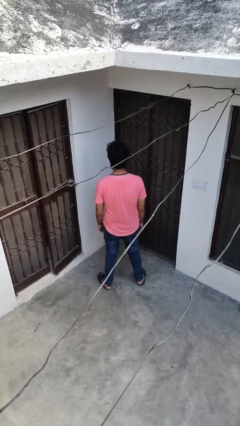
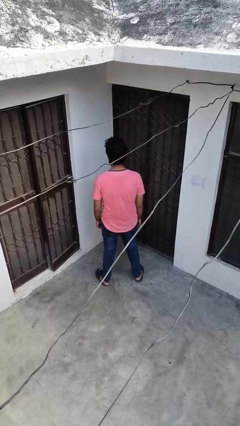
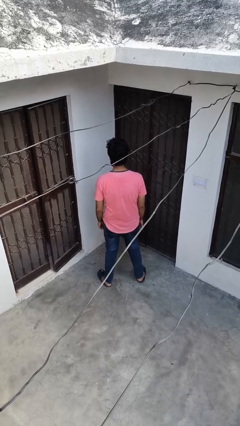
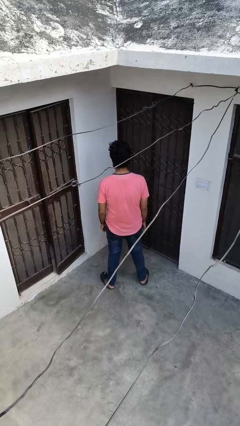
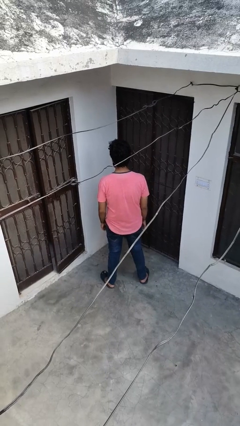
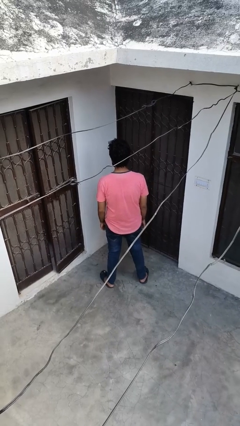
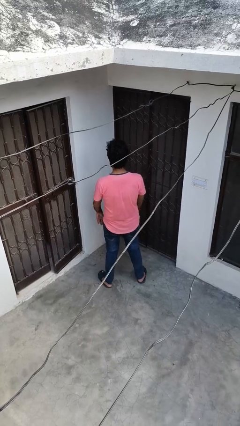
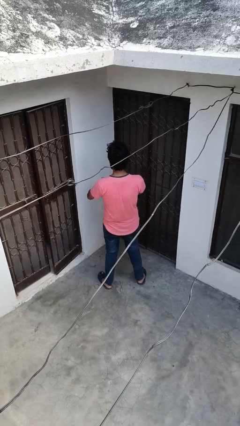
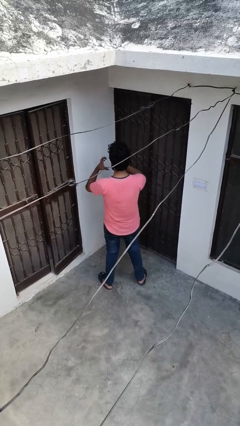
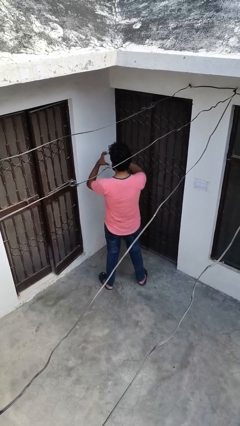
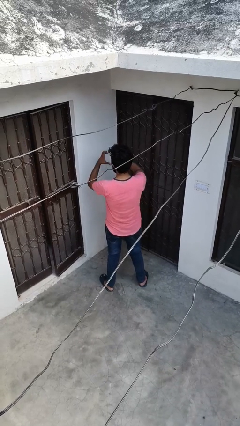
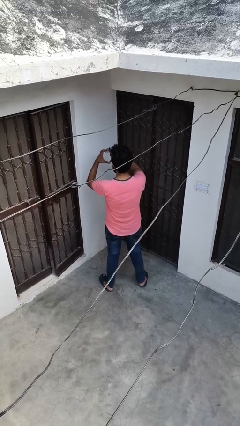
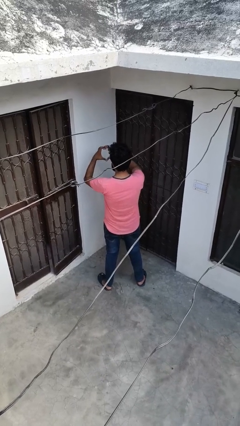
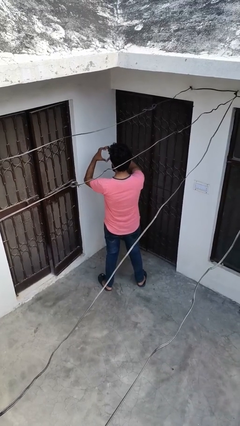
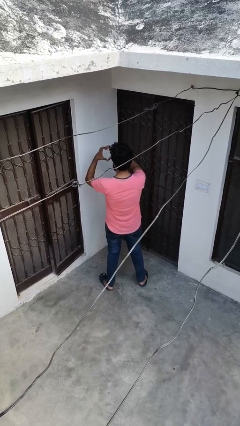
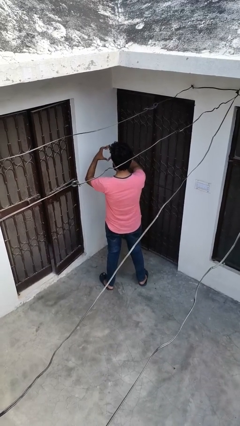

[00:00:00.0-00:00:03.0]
person gestures heart

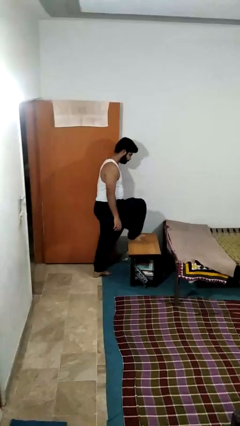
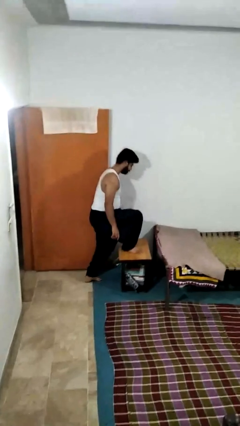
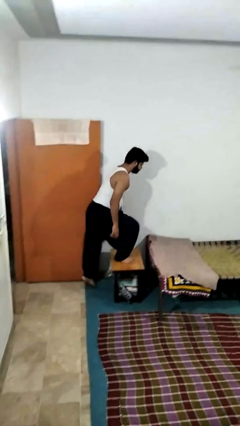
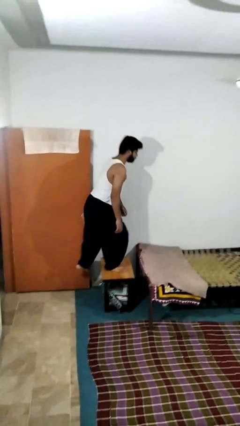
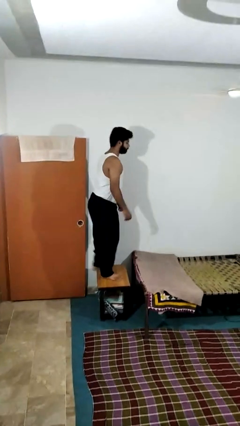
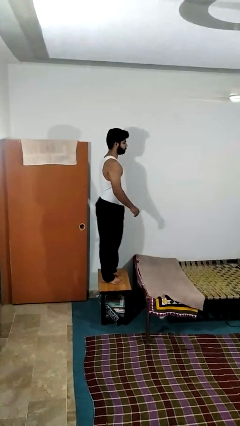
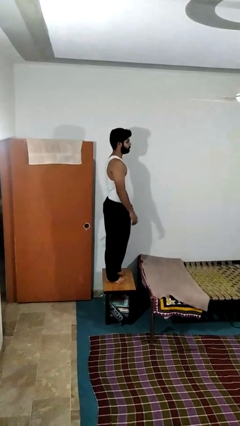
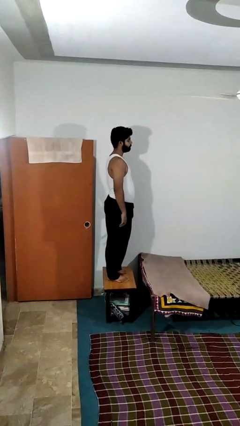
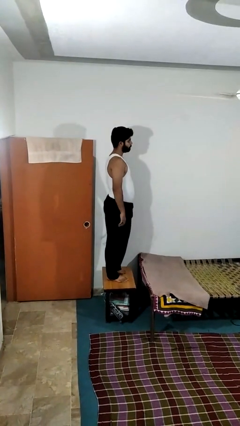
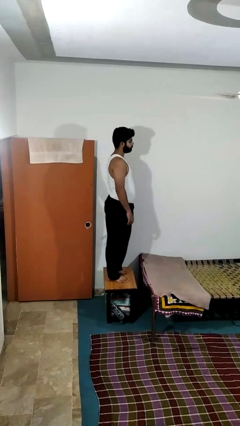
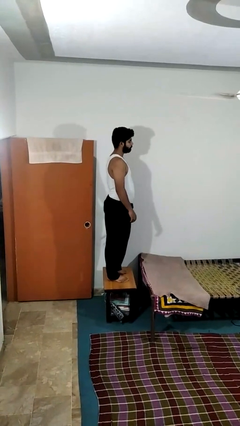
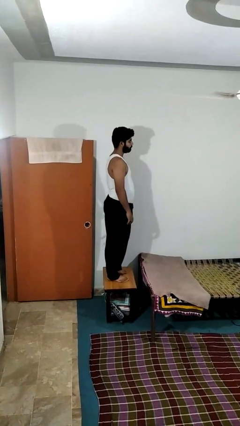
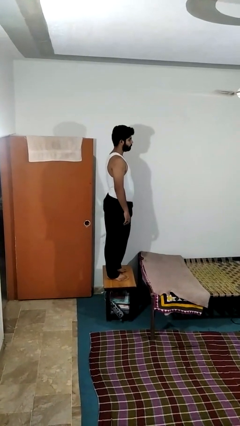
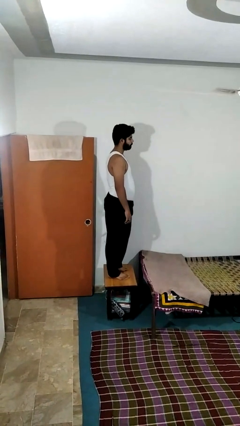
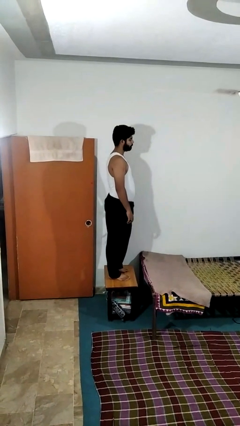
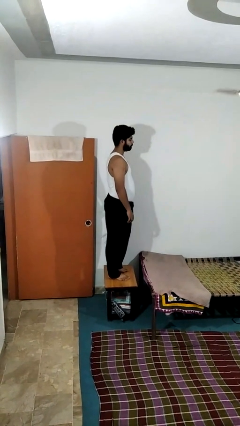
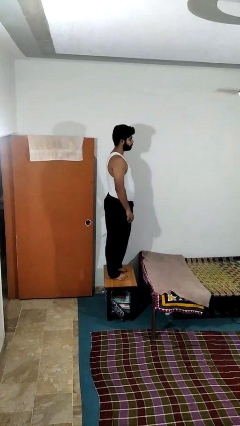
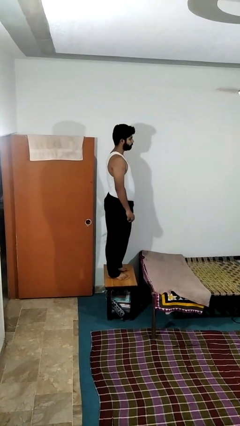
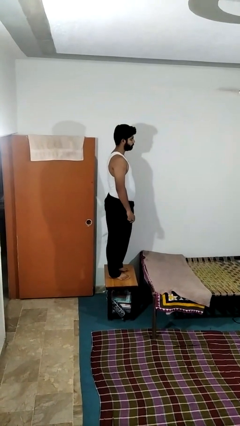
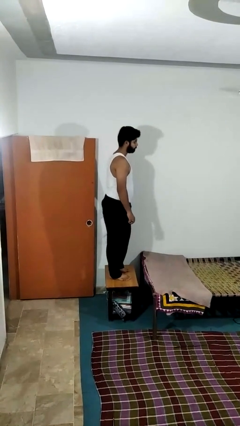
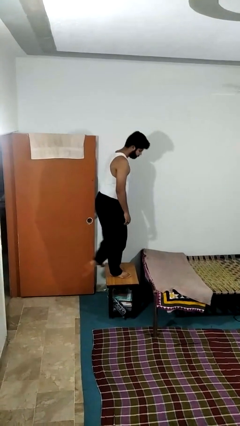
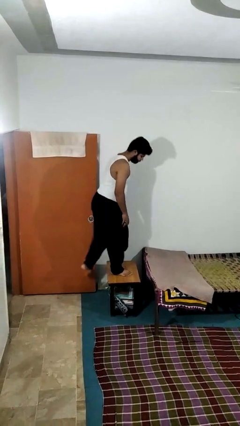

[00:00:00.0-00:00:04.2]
person climbs on table

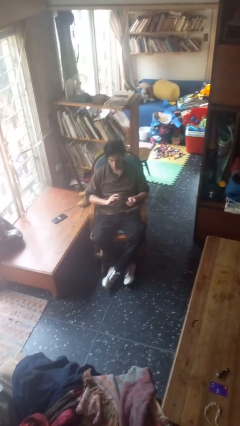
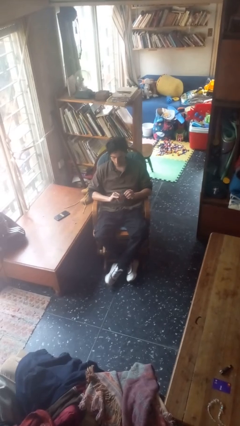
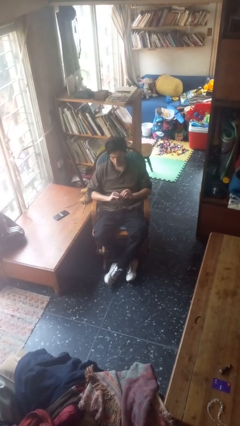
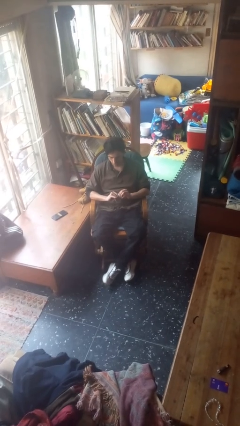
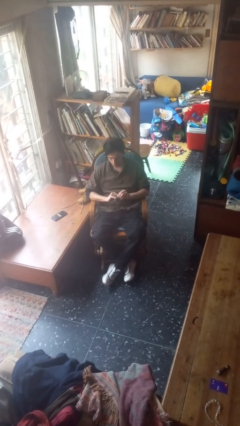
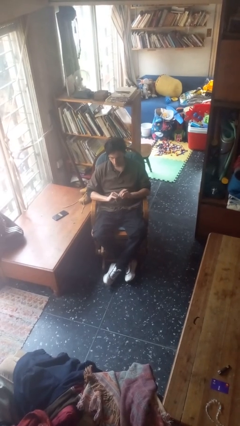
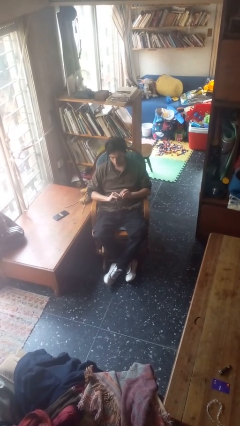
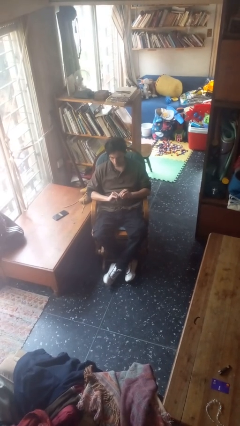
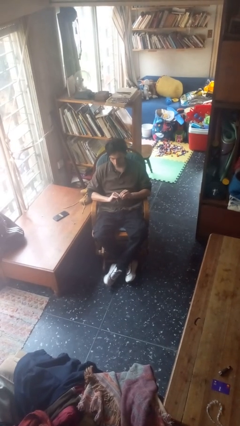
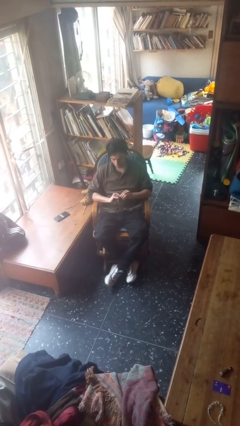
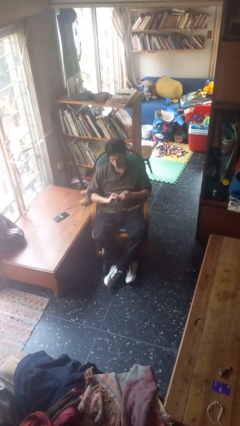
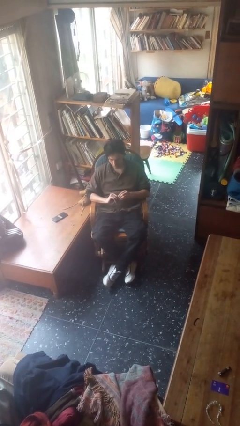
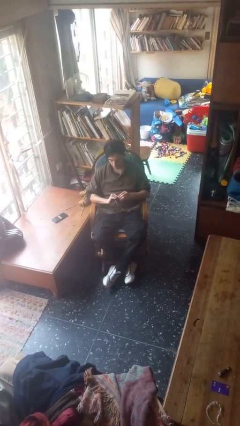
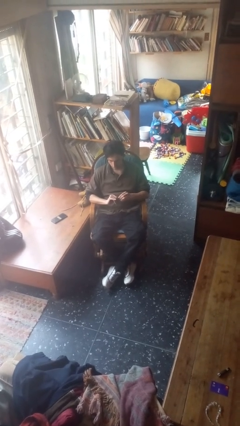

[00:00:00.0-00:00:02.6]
person files fingernails

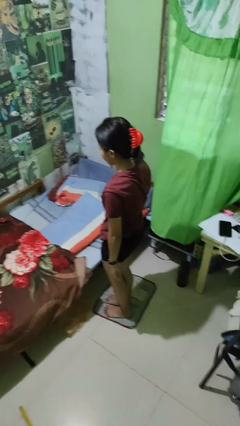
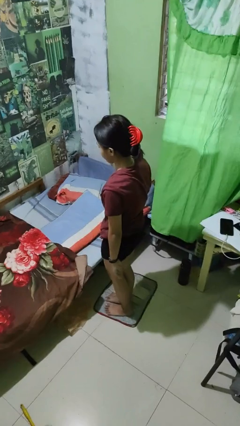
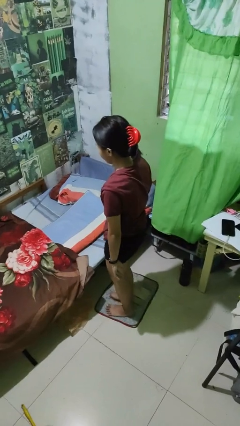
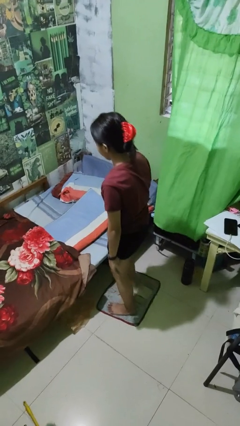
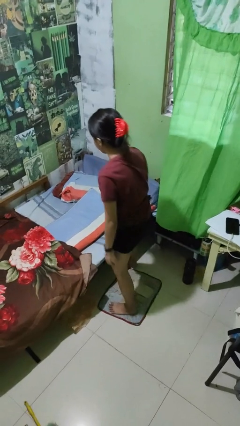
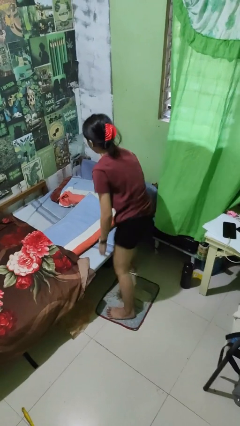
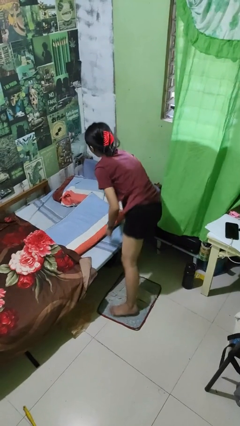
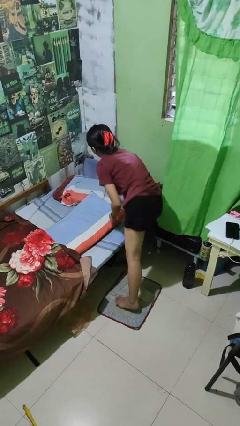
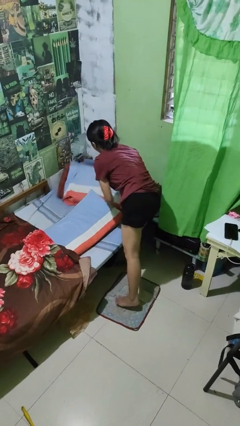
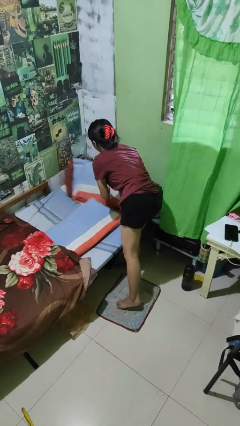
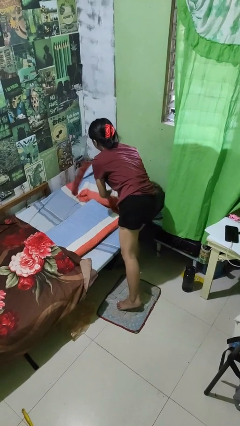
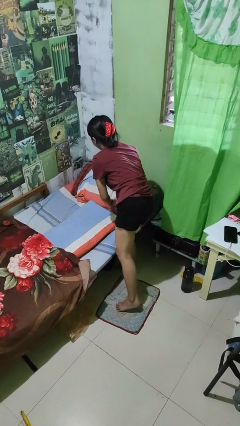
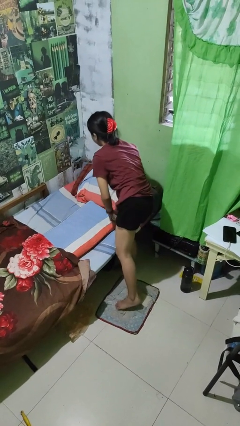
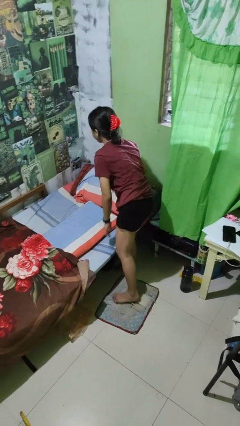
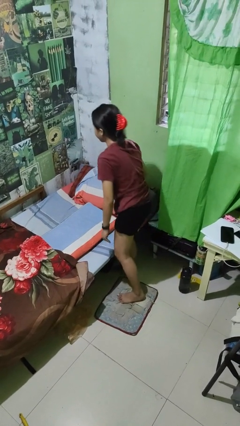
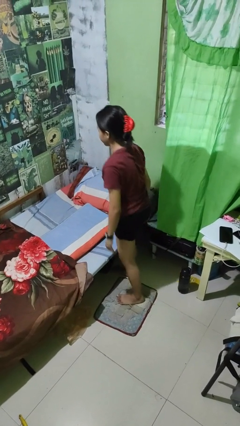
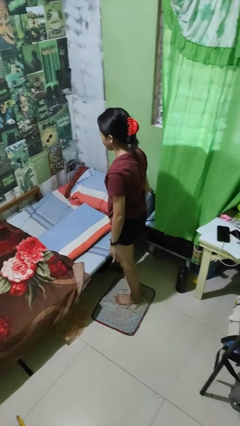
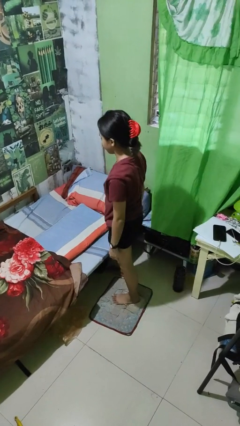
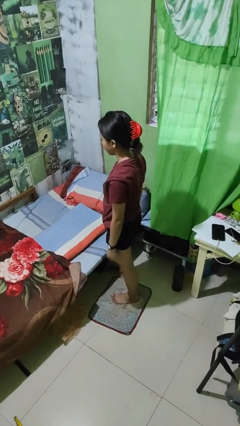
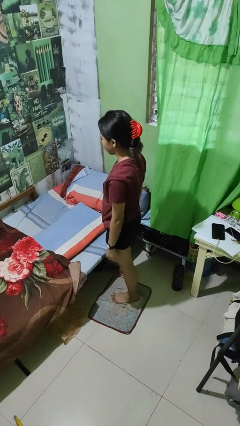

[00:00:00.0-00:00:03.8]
person makes bed

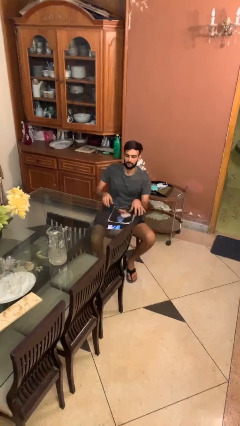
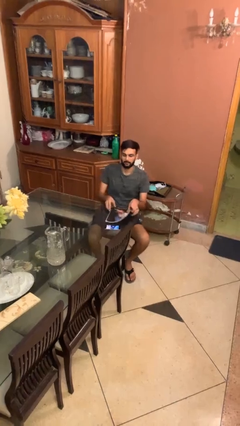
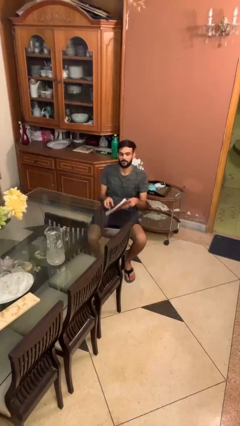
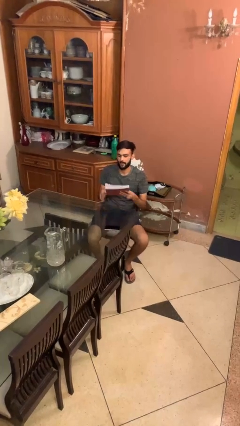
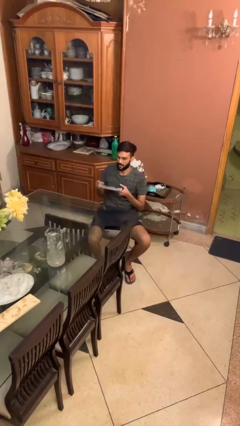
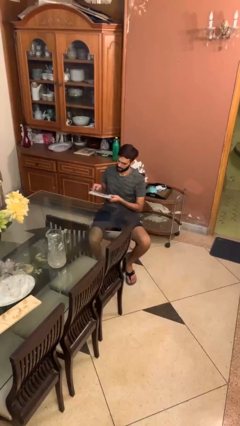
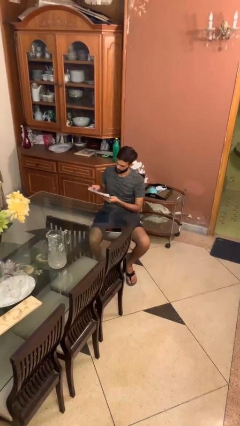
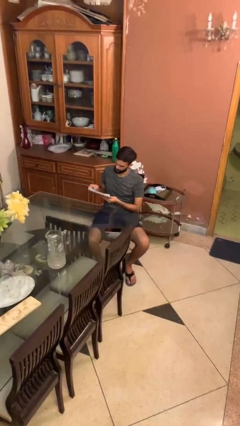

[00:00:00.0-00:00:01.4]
person picks up object from table

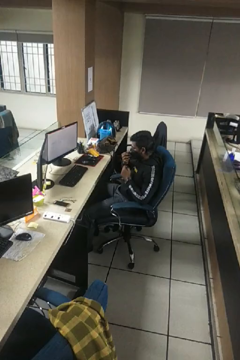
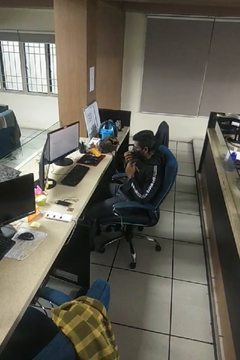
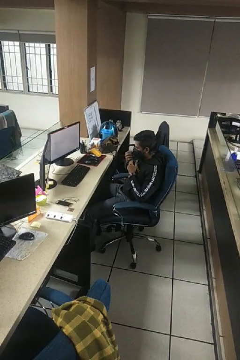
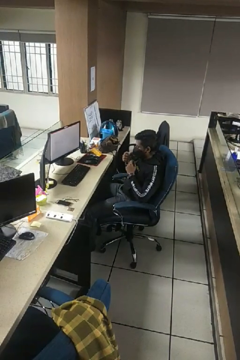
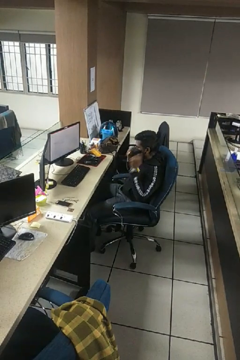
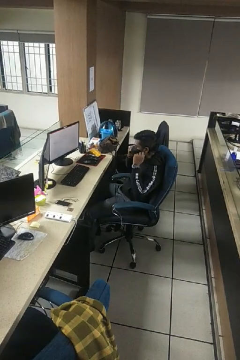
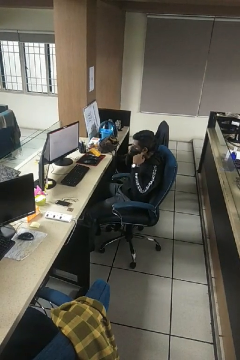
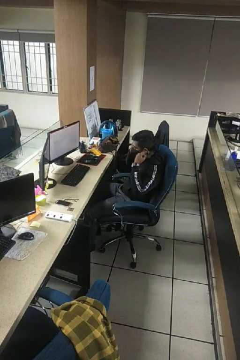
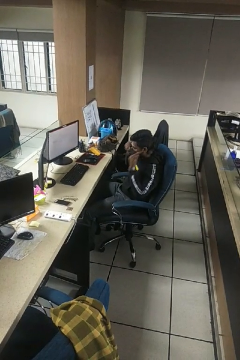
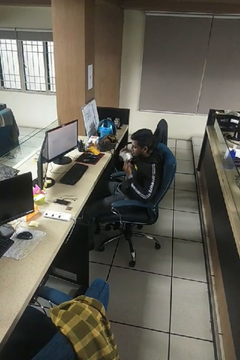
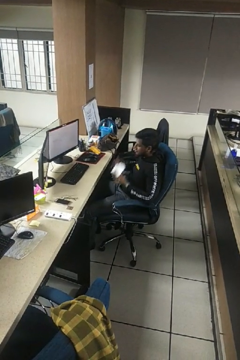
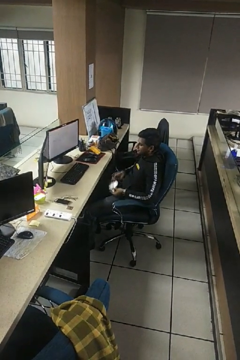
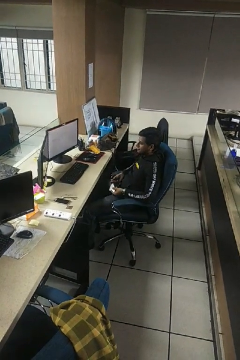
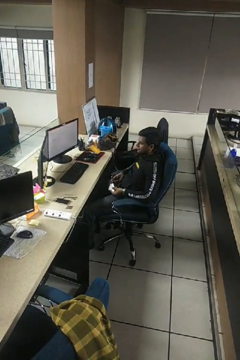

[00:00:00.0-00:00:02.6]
person takes off facemask
